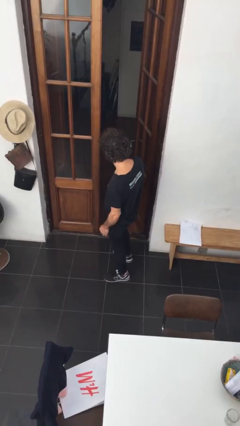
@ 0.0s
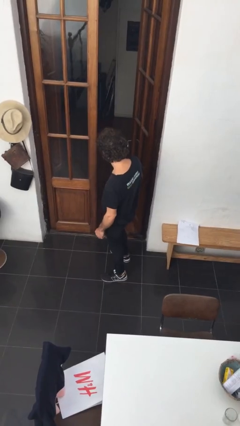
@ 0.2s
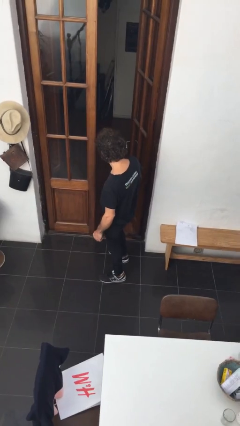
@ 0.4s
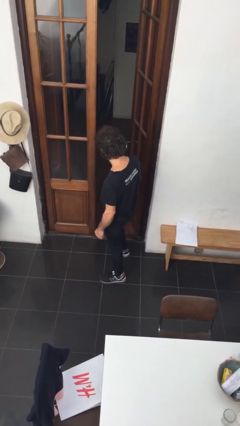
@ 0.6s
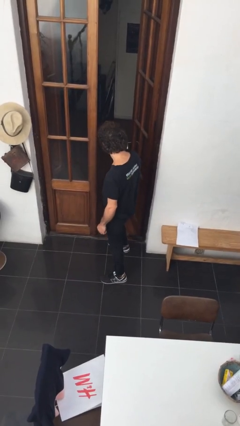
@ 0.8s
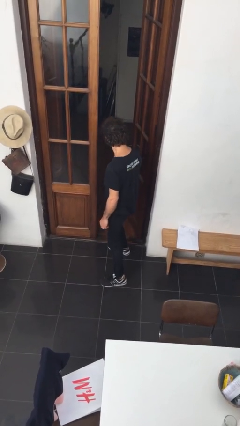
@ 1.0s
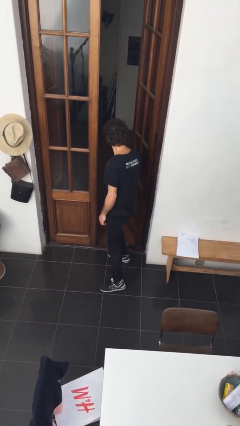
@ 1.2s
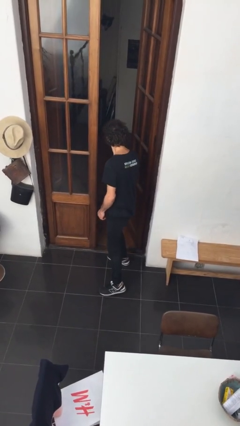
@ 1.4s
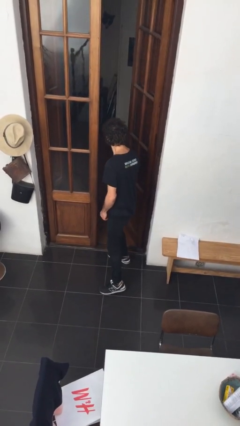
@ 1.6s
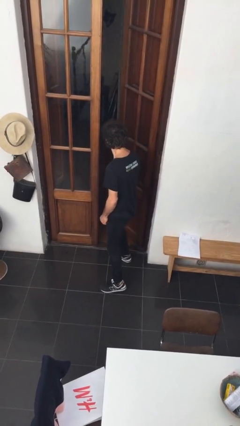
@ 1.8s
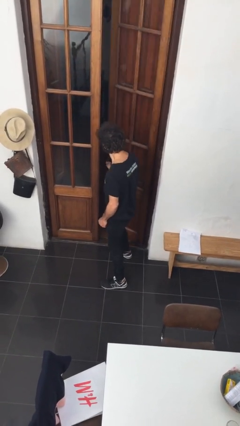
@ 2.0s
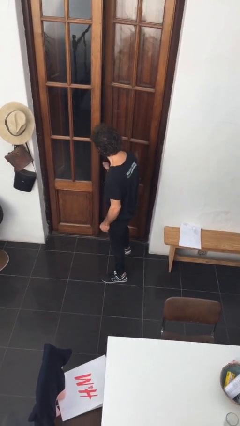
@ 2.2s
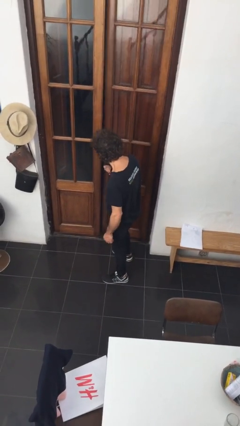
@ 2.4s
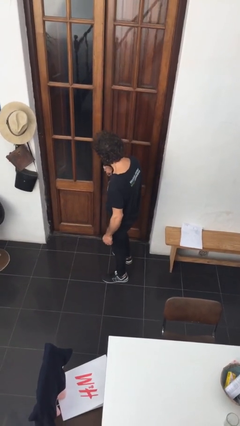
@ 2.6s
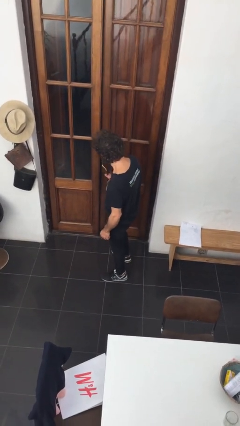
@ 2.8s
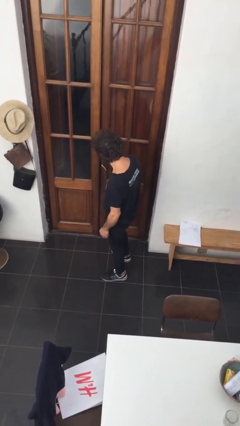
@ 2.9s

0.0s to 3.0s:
person closes facility door

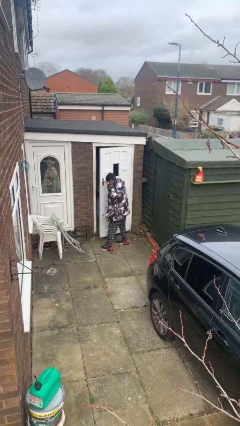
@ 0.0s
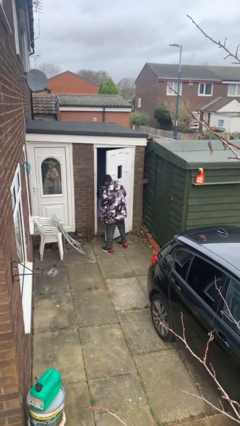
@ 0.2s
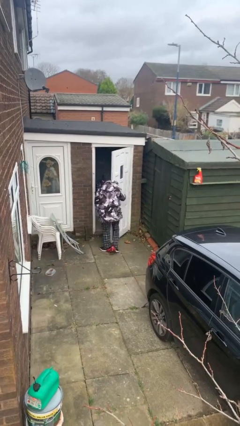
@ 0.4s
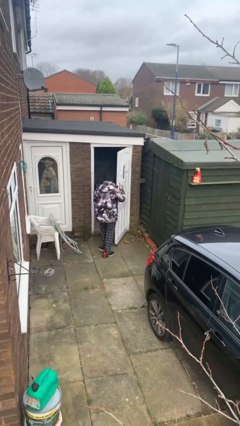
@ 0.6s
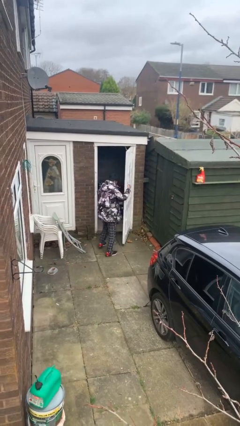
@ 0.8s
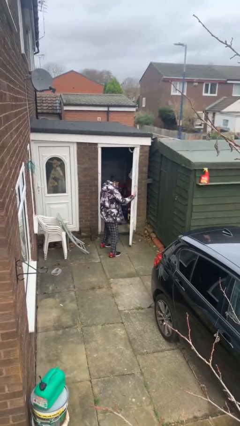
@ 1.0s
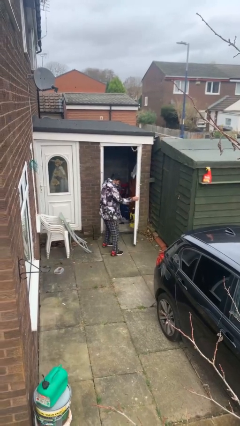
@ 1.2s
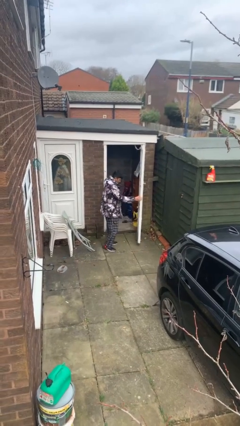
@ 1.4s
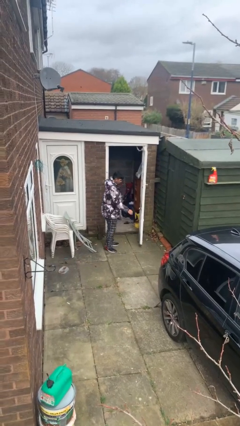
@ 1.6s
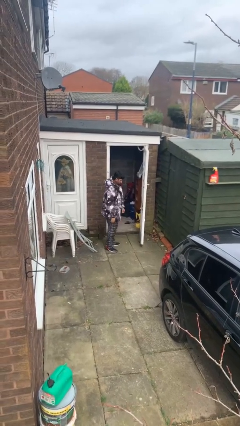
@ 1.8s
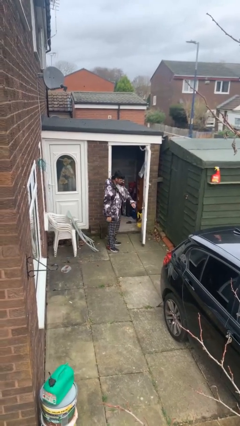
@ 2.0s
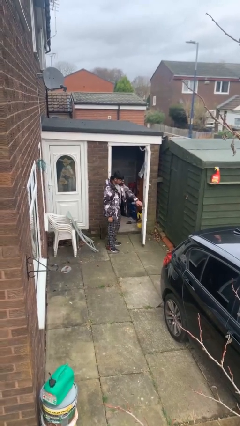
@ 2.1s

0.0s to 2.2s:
person opens facility door

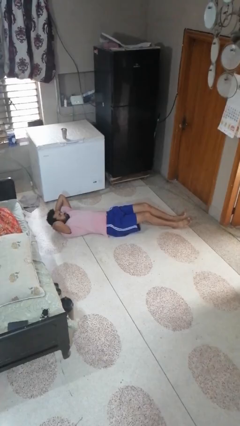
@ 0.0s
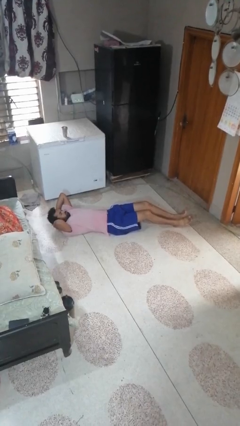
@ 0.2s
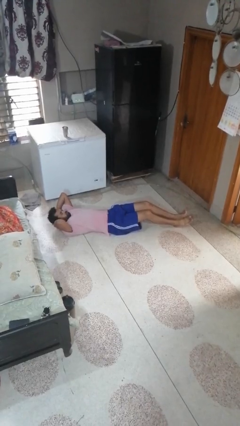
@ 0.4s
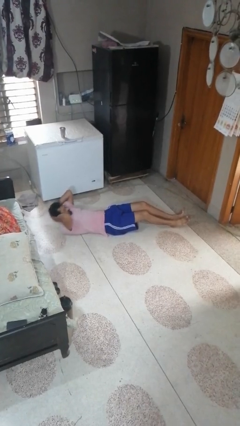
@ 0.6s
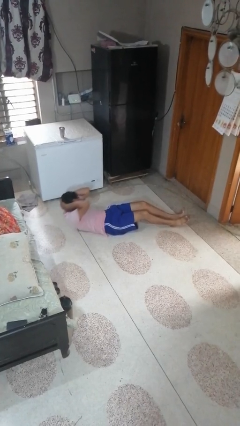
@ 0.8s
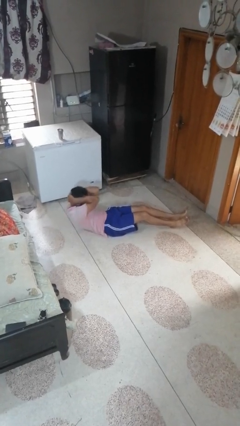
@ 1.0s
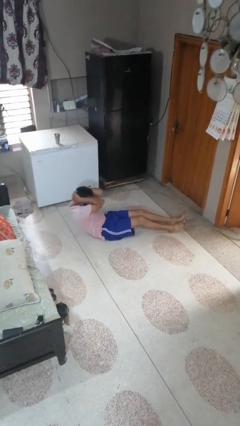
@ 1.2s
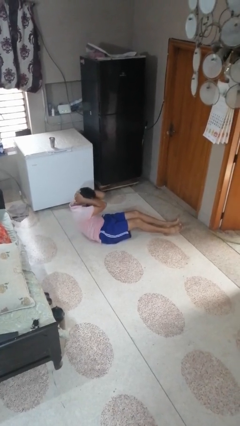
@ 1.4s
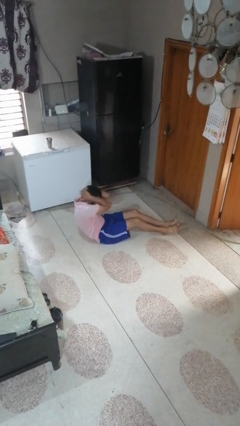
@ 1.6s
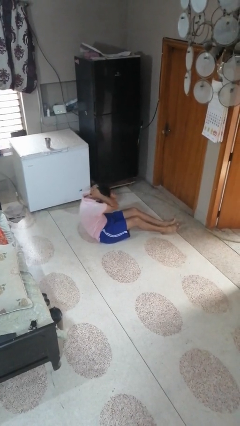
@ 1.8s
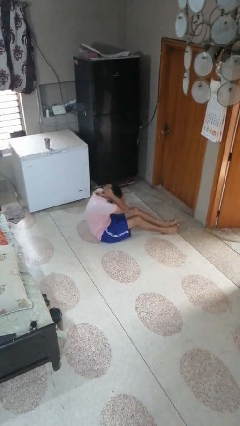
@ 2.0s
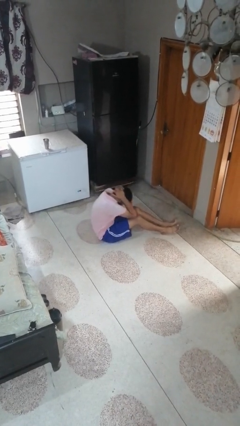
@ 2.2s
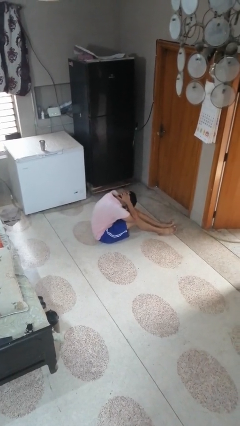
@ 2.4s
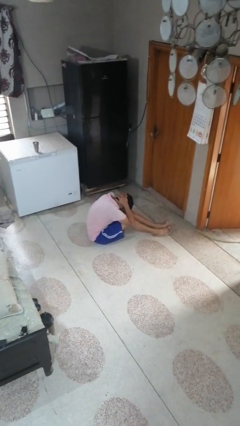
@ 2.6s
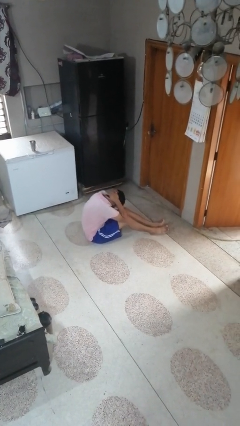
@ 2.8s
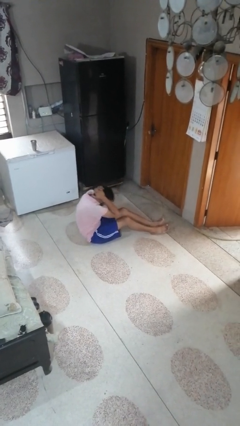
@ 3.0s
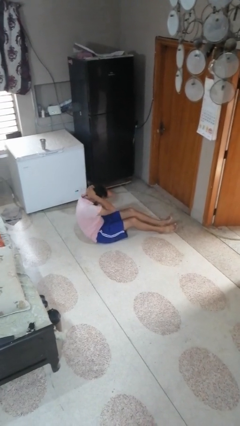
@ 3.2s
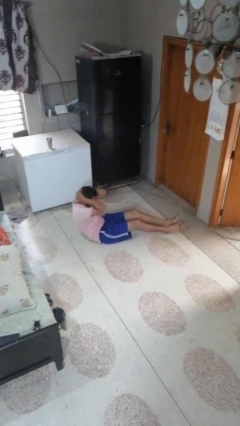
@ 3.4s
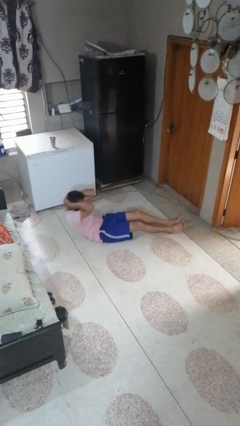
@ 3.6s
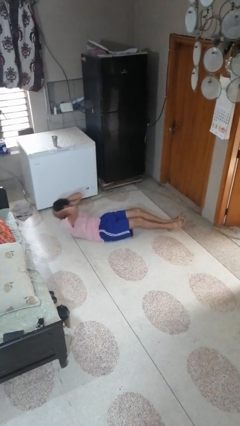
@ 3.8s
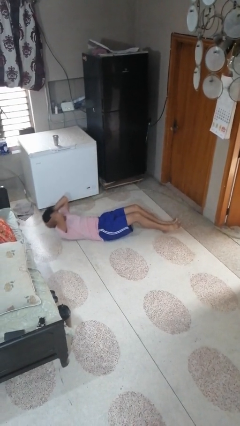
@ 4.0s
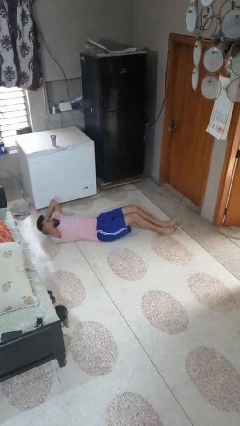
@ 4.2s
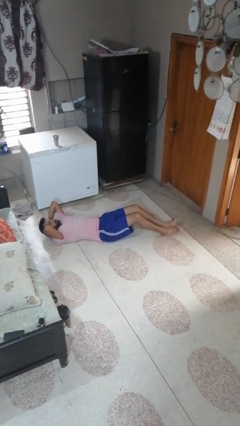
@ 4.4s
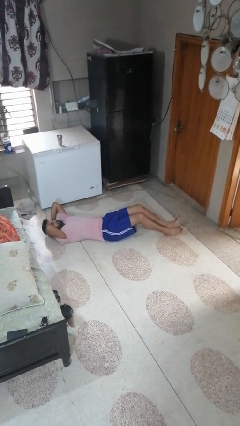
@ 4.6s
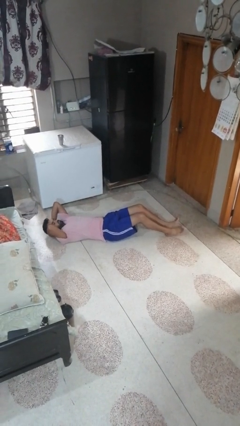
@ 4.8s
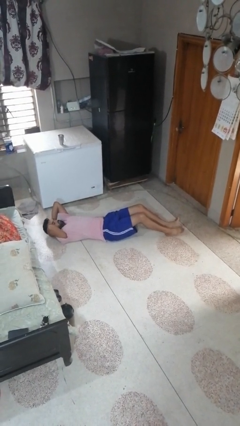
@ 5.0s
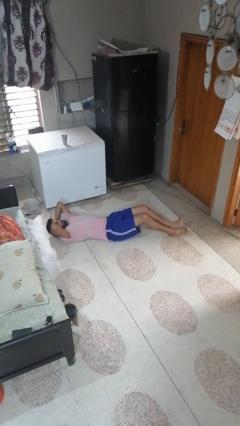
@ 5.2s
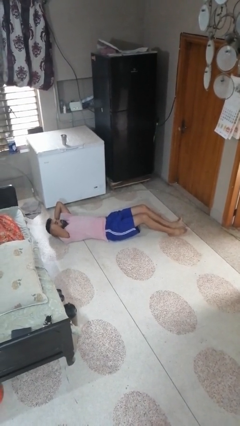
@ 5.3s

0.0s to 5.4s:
person exercises with situp

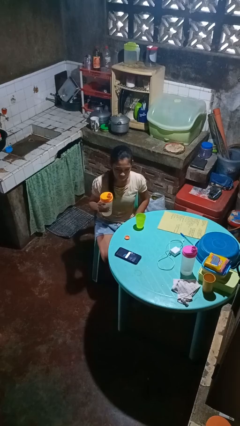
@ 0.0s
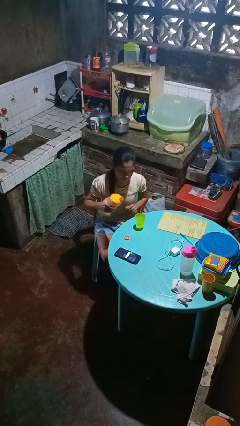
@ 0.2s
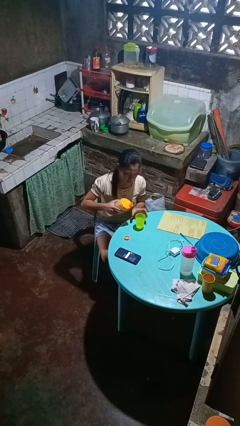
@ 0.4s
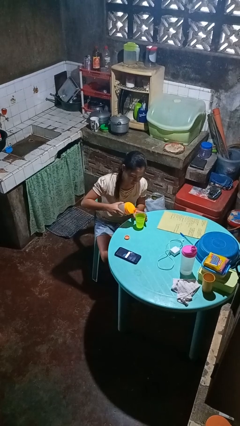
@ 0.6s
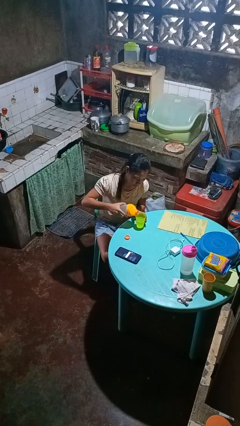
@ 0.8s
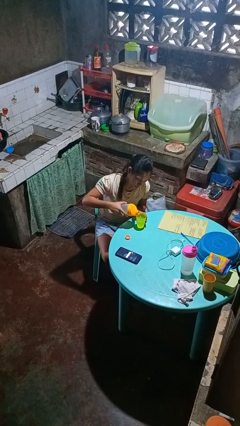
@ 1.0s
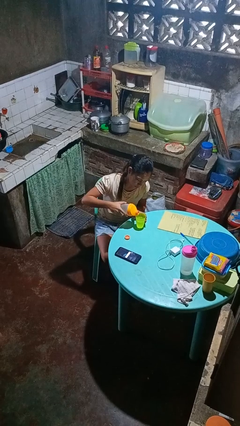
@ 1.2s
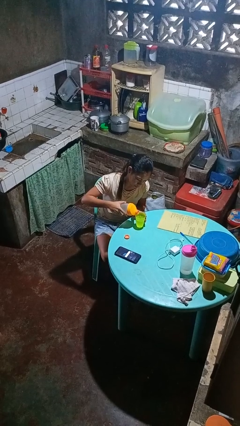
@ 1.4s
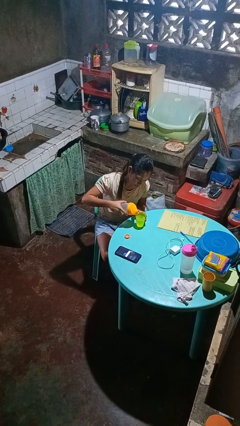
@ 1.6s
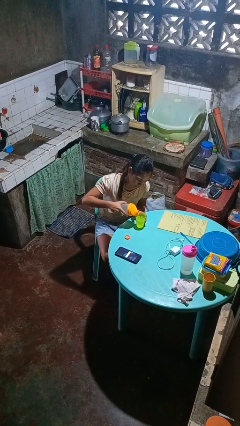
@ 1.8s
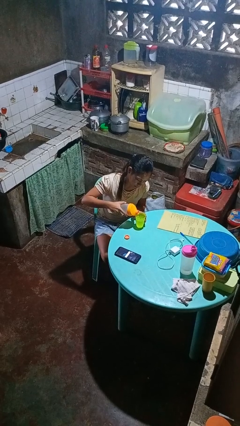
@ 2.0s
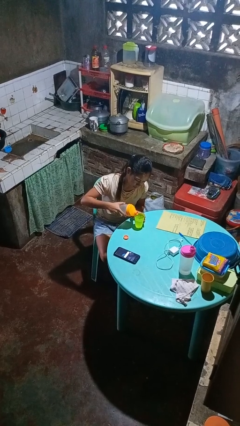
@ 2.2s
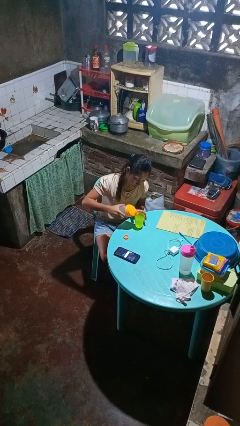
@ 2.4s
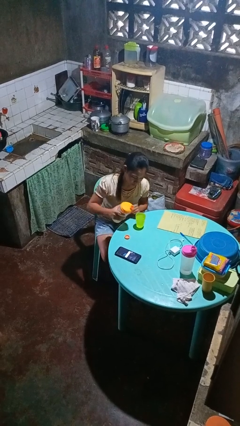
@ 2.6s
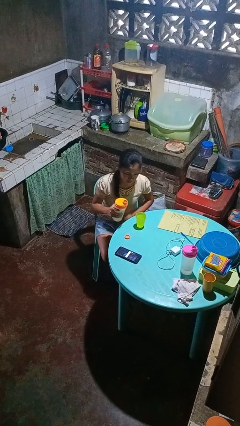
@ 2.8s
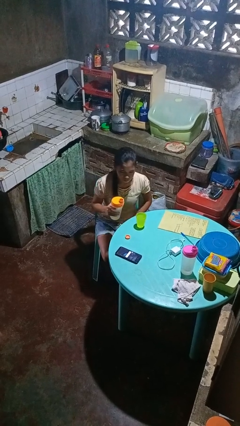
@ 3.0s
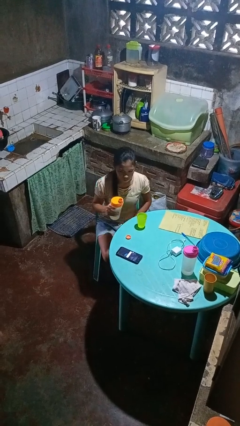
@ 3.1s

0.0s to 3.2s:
person pours liquid into cup

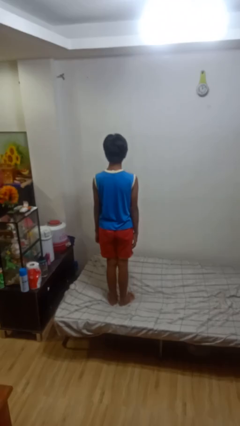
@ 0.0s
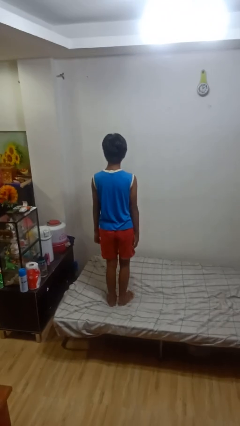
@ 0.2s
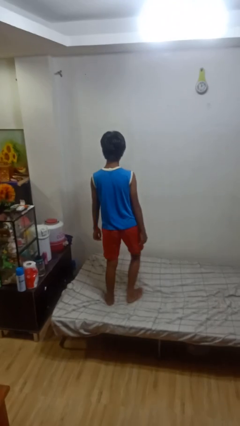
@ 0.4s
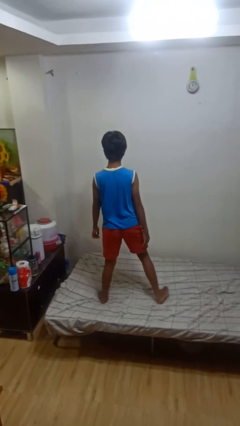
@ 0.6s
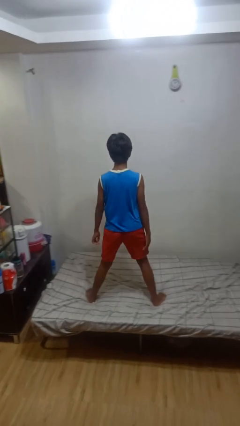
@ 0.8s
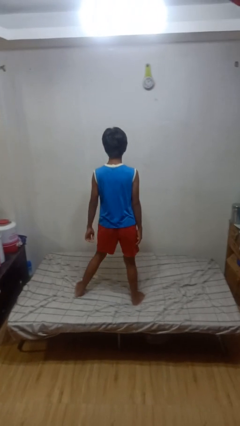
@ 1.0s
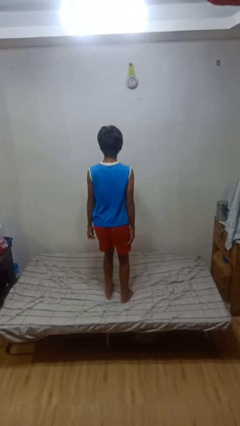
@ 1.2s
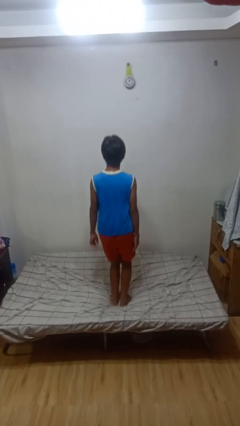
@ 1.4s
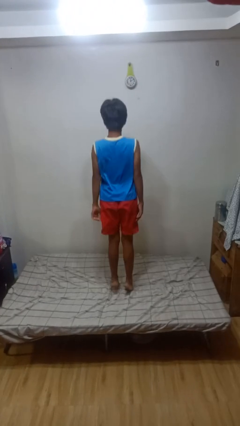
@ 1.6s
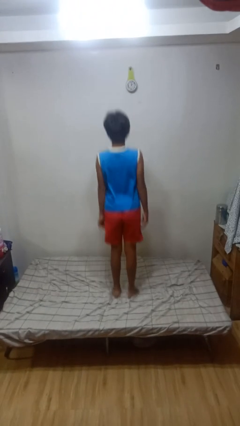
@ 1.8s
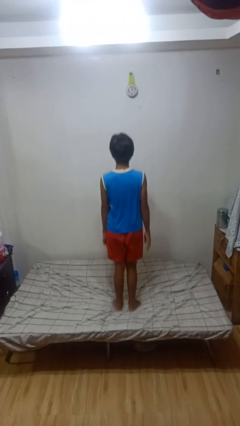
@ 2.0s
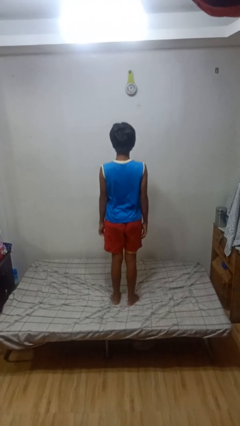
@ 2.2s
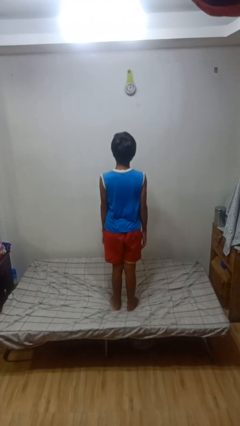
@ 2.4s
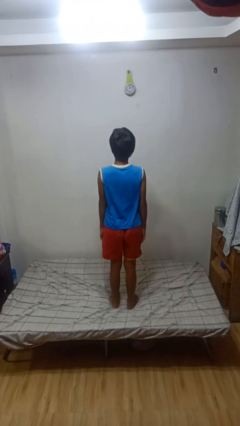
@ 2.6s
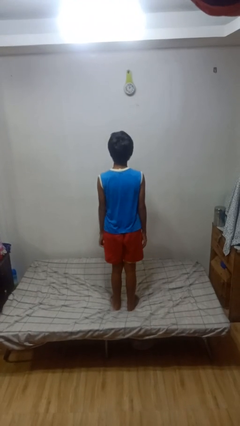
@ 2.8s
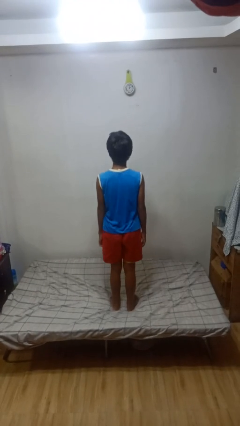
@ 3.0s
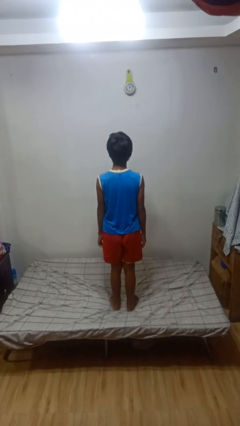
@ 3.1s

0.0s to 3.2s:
person jumps on bed

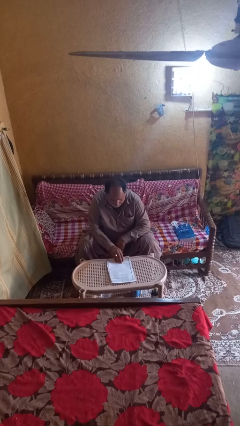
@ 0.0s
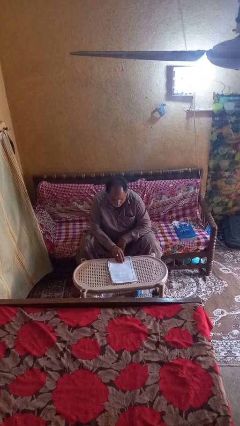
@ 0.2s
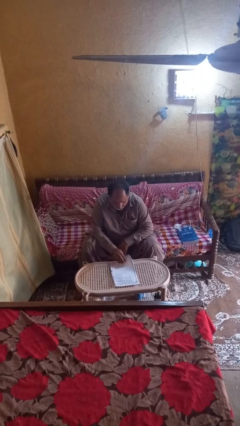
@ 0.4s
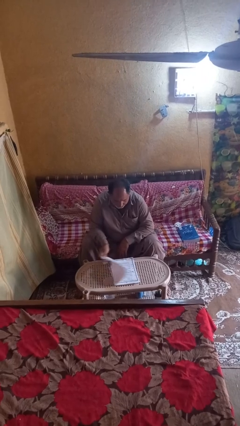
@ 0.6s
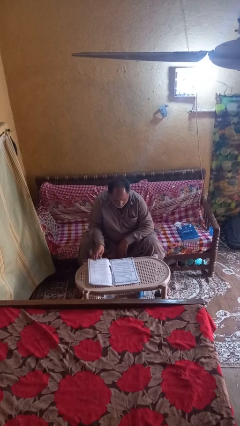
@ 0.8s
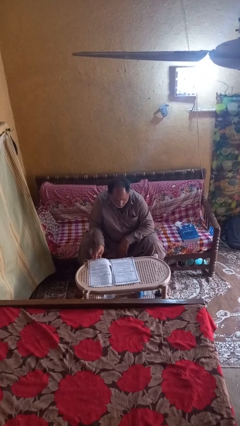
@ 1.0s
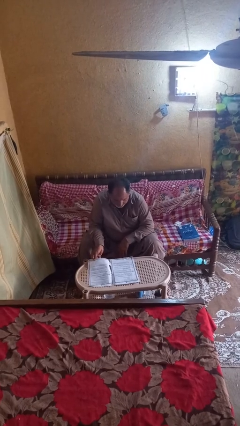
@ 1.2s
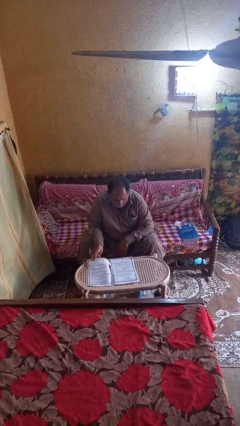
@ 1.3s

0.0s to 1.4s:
person reads newspaper
